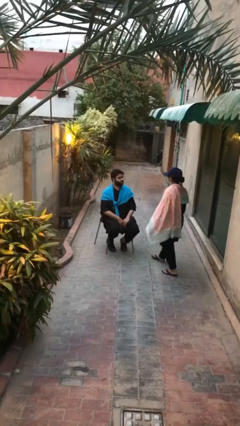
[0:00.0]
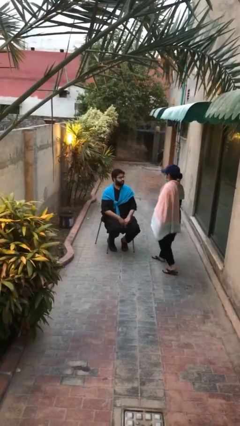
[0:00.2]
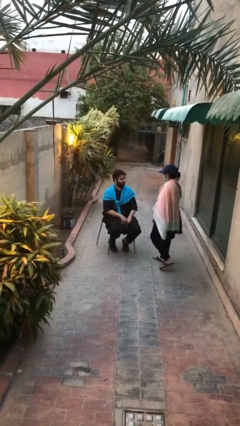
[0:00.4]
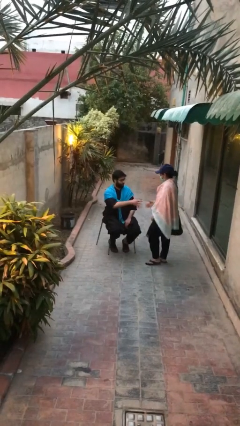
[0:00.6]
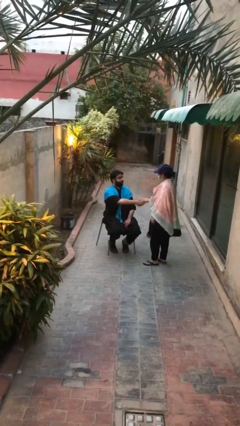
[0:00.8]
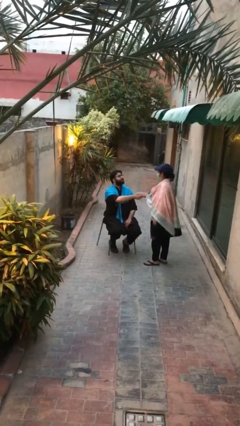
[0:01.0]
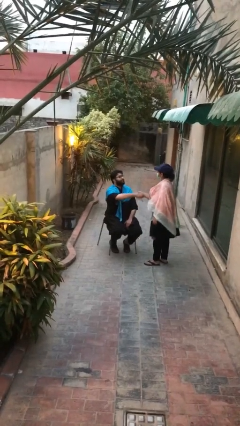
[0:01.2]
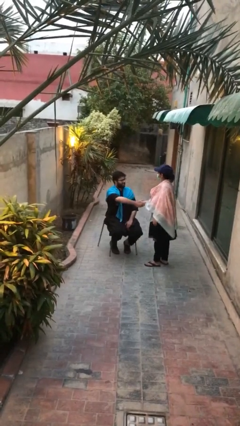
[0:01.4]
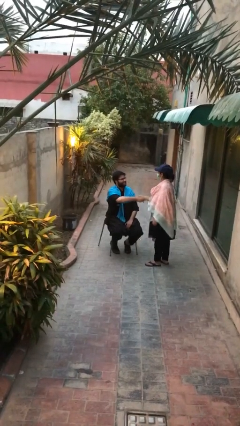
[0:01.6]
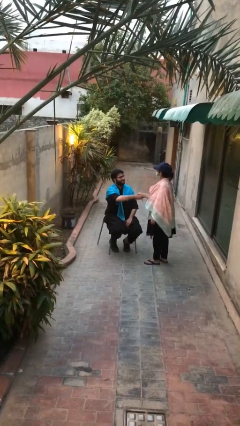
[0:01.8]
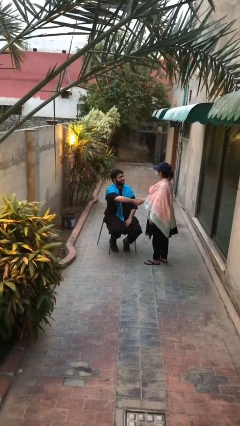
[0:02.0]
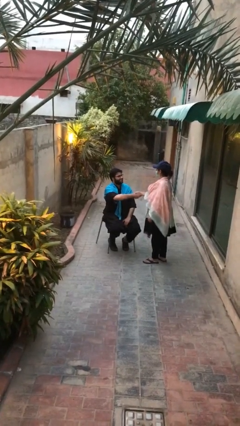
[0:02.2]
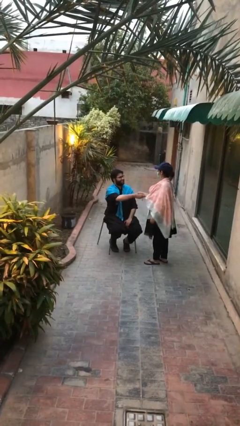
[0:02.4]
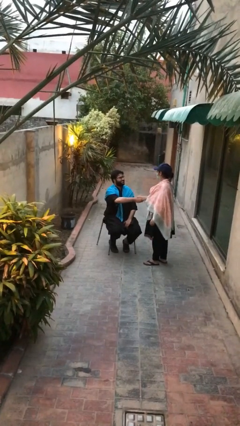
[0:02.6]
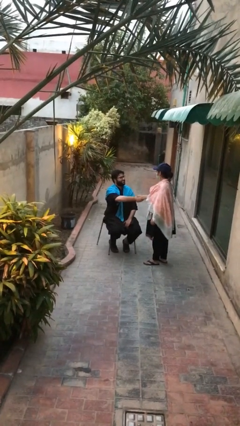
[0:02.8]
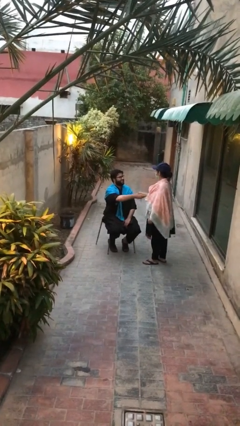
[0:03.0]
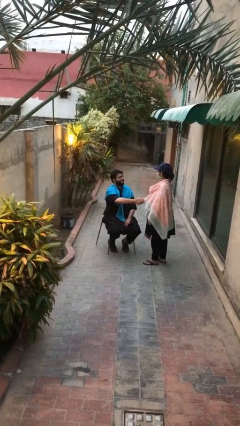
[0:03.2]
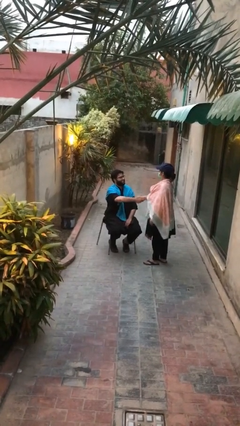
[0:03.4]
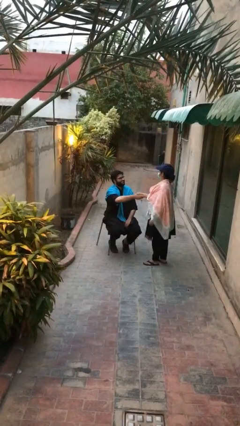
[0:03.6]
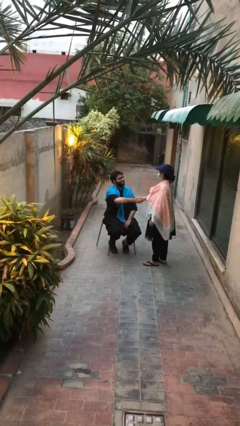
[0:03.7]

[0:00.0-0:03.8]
person shakes hand

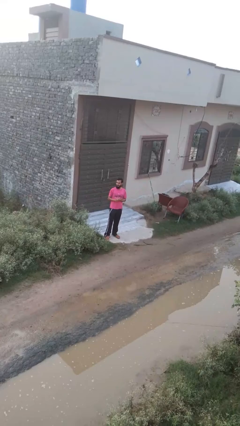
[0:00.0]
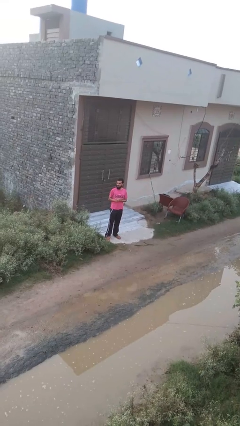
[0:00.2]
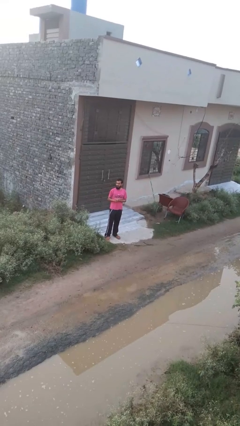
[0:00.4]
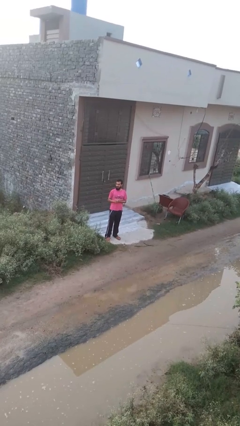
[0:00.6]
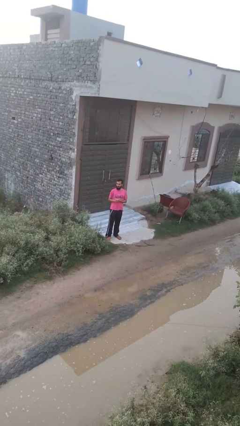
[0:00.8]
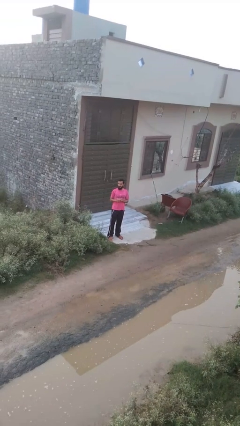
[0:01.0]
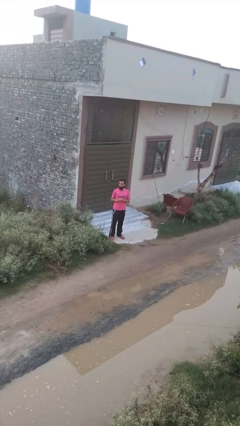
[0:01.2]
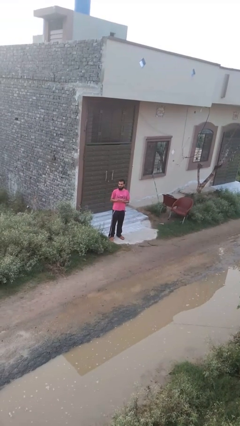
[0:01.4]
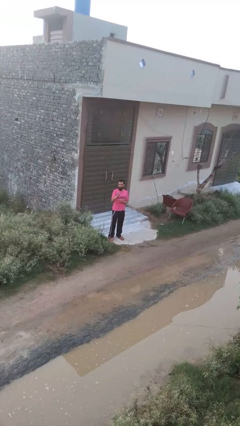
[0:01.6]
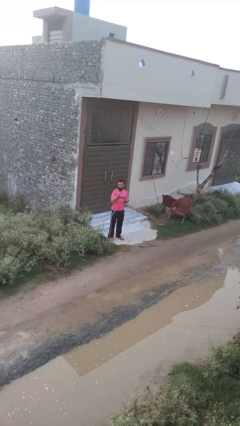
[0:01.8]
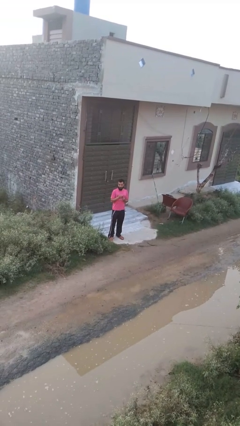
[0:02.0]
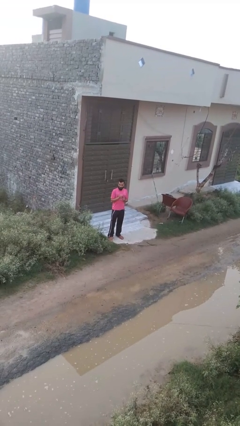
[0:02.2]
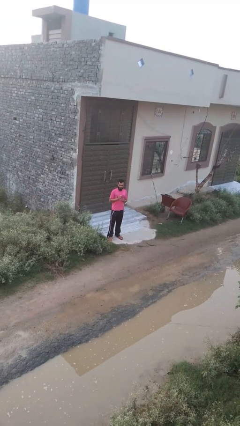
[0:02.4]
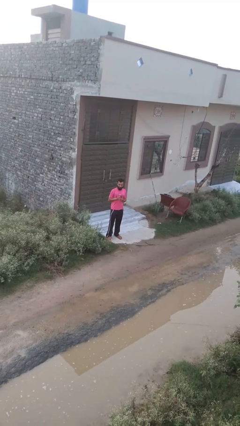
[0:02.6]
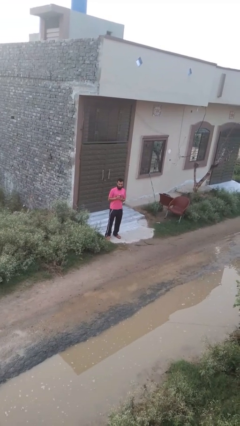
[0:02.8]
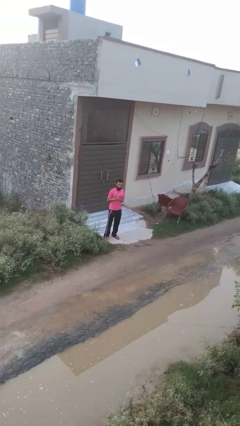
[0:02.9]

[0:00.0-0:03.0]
person punches

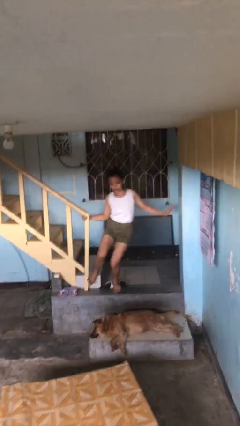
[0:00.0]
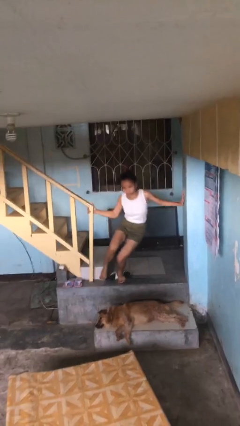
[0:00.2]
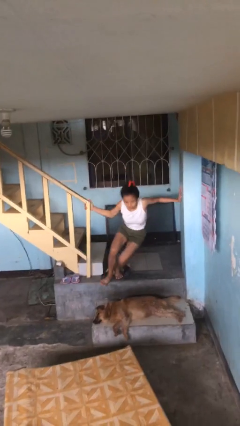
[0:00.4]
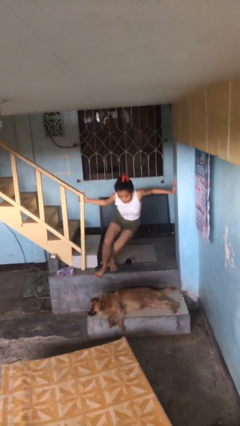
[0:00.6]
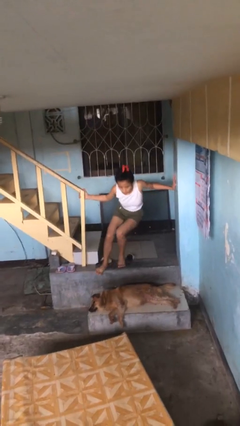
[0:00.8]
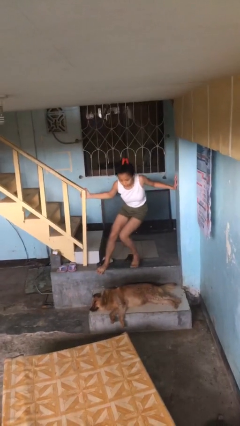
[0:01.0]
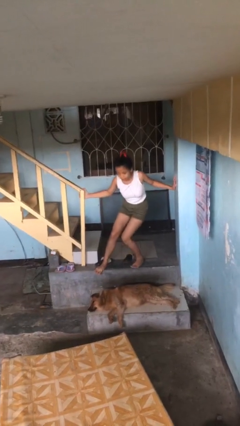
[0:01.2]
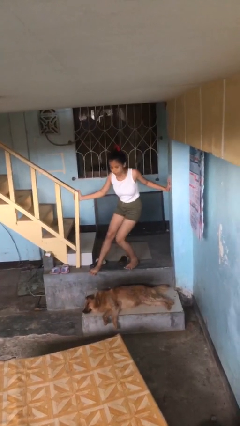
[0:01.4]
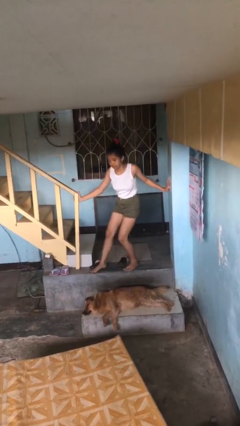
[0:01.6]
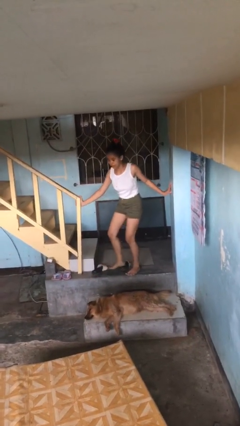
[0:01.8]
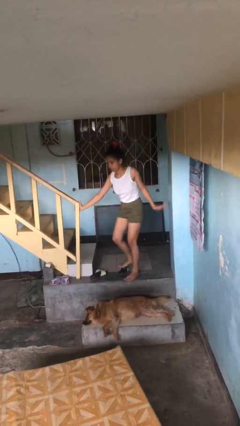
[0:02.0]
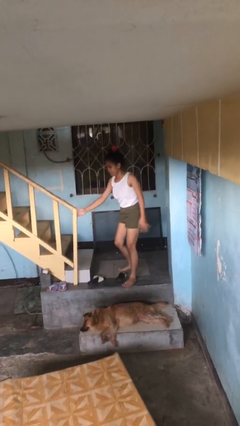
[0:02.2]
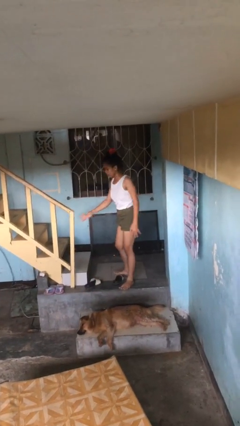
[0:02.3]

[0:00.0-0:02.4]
person trips on stair

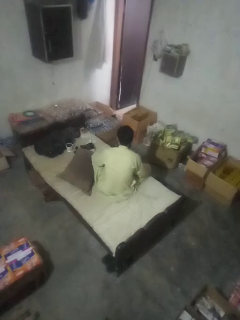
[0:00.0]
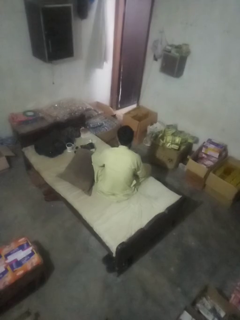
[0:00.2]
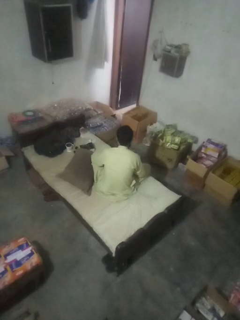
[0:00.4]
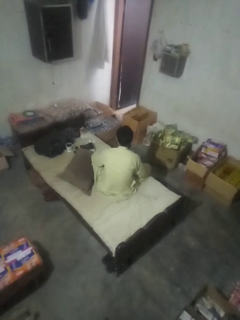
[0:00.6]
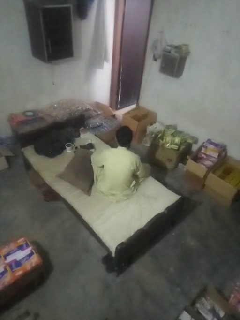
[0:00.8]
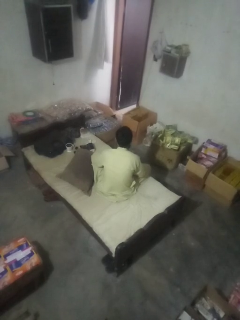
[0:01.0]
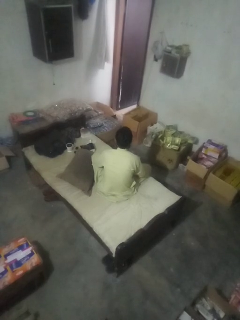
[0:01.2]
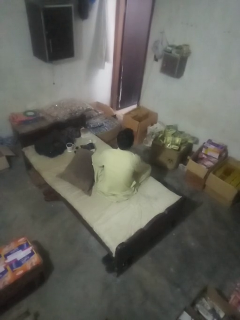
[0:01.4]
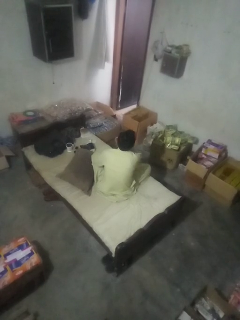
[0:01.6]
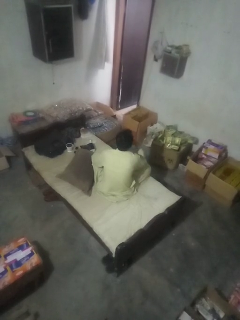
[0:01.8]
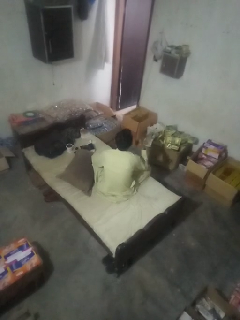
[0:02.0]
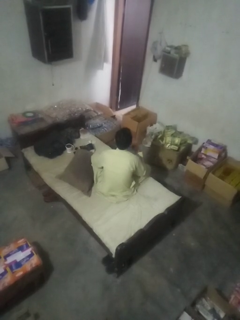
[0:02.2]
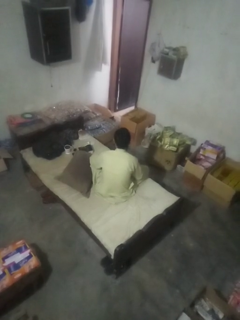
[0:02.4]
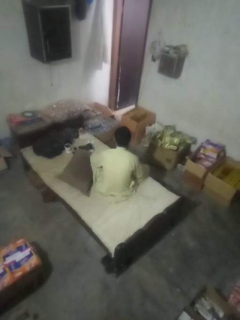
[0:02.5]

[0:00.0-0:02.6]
person gestures cut

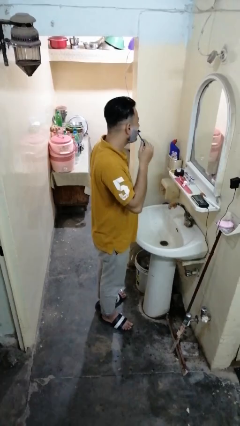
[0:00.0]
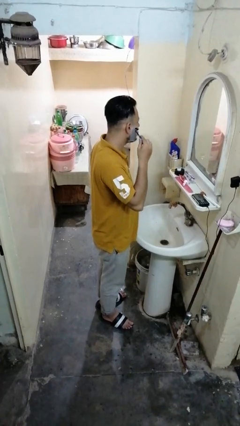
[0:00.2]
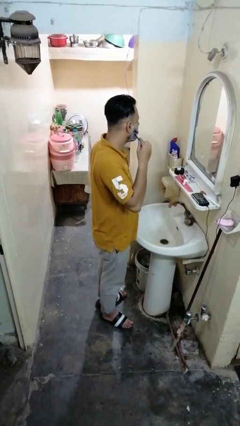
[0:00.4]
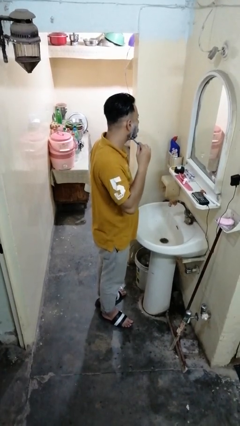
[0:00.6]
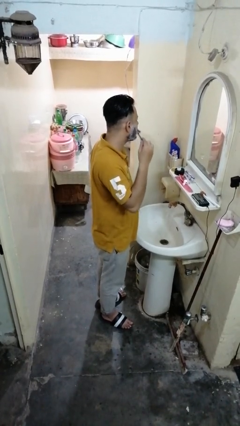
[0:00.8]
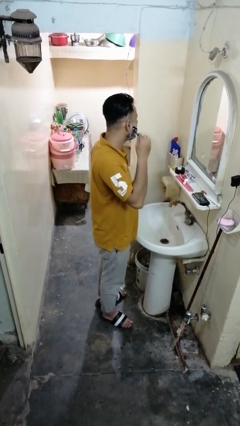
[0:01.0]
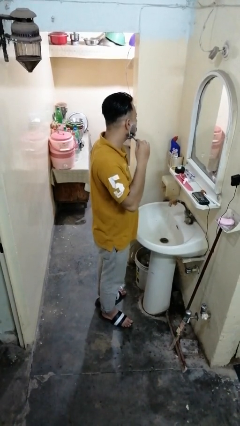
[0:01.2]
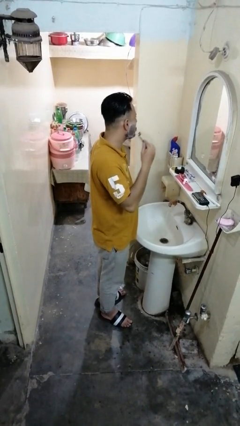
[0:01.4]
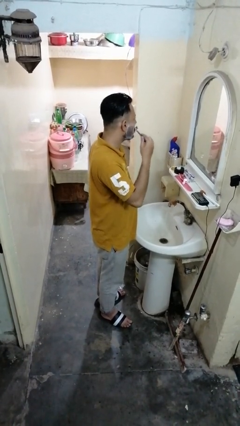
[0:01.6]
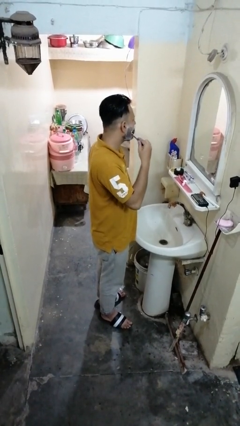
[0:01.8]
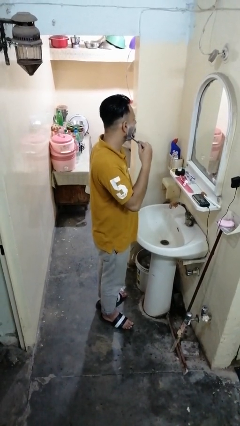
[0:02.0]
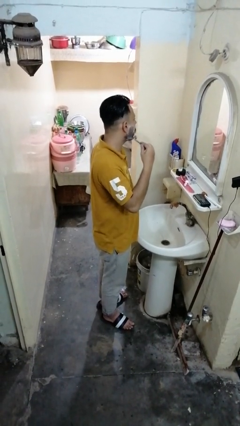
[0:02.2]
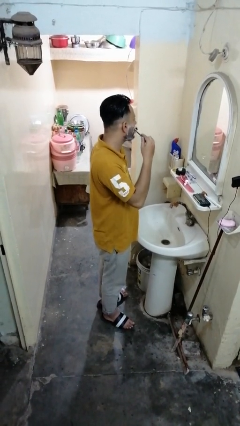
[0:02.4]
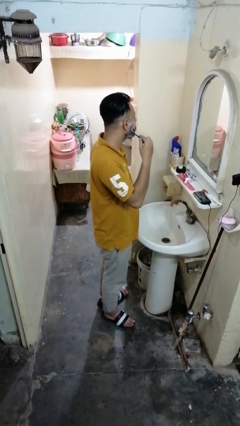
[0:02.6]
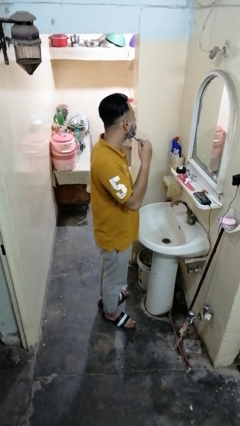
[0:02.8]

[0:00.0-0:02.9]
person shaves face

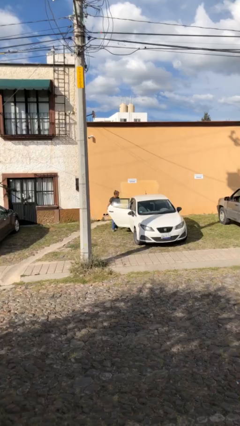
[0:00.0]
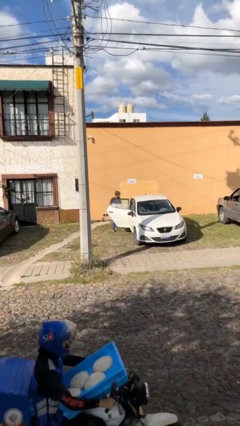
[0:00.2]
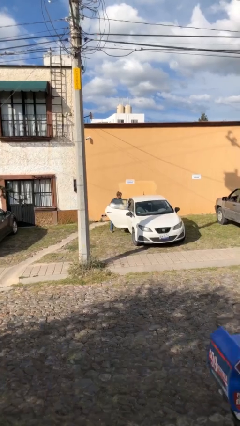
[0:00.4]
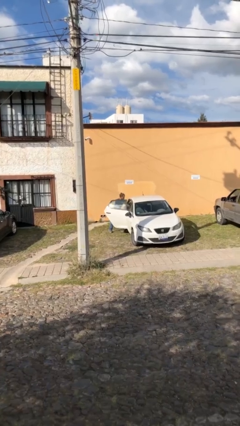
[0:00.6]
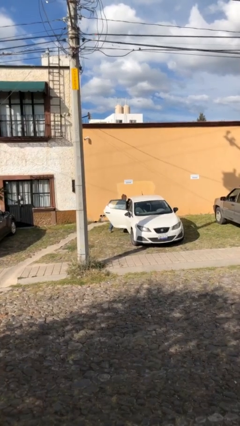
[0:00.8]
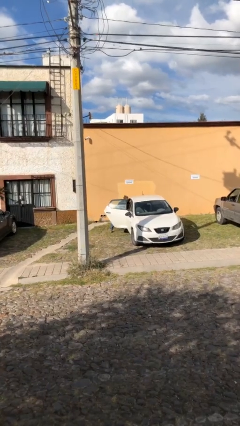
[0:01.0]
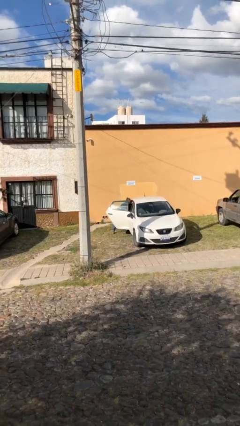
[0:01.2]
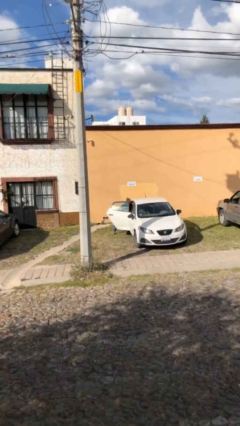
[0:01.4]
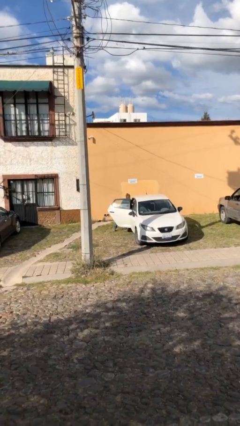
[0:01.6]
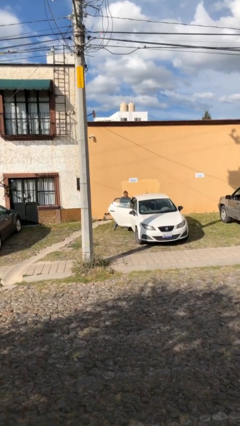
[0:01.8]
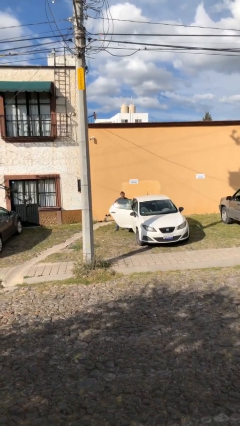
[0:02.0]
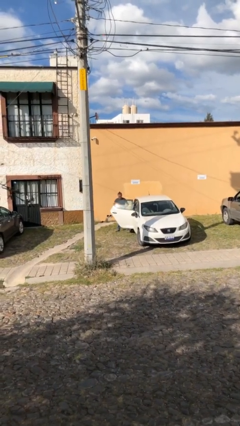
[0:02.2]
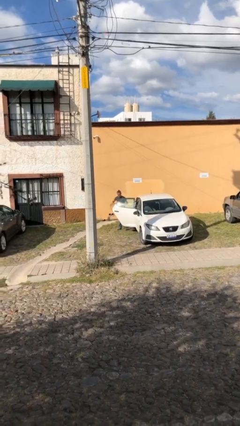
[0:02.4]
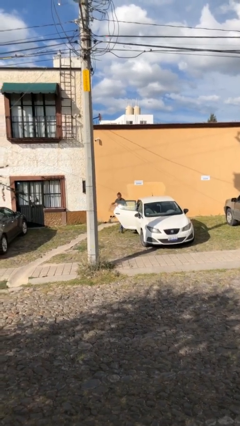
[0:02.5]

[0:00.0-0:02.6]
person unloads car

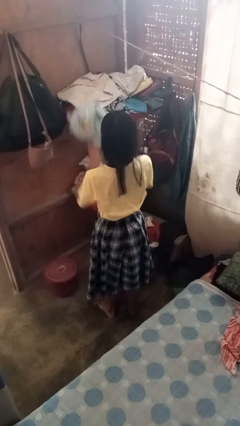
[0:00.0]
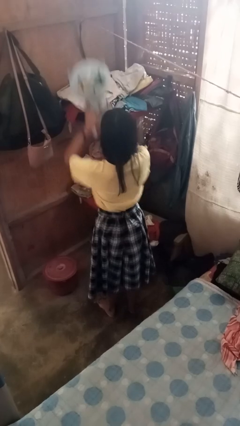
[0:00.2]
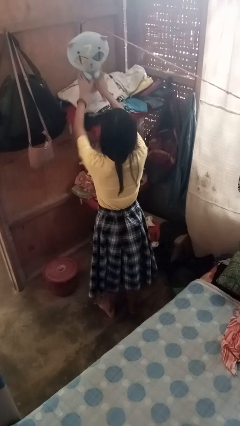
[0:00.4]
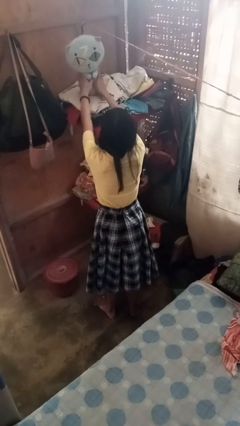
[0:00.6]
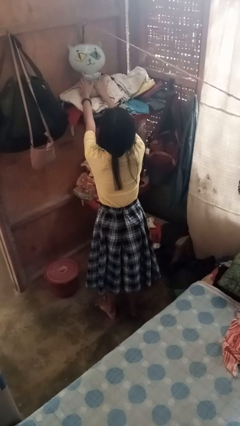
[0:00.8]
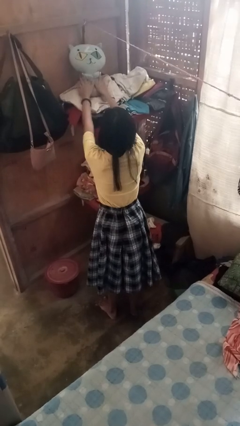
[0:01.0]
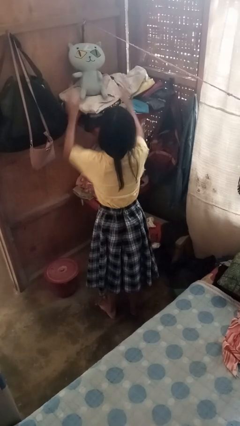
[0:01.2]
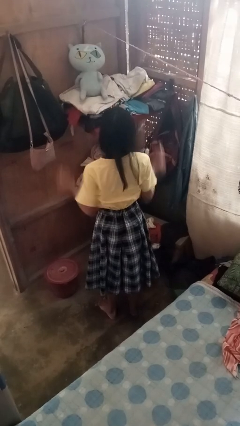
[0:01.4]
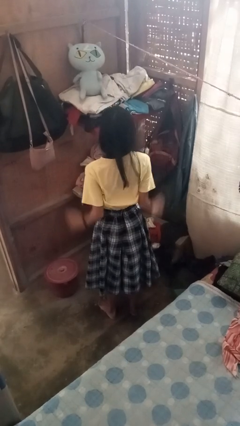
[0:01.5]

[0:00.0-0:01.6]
person puts down object on shelf
